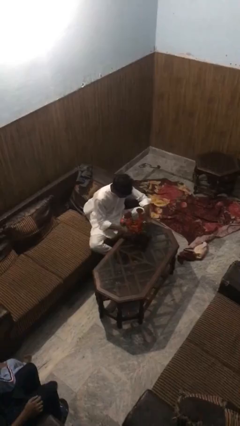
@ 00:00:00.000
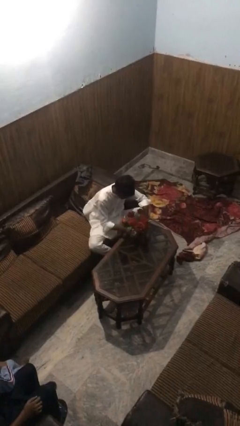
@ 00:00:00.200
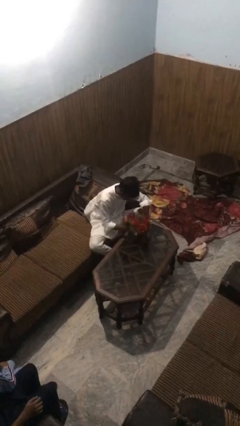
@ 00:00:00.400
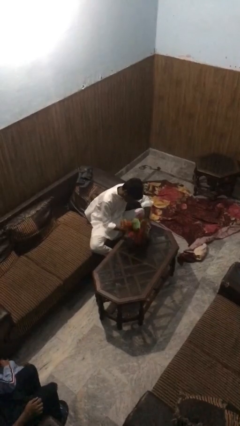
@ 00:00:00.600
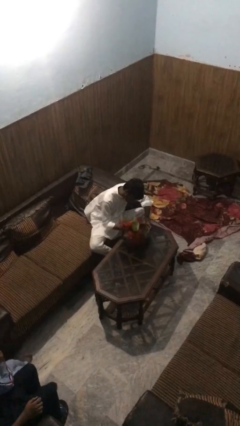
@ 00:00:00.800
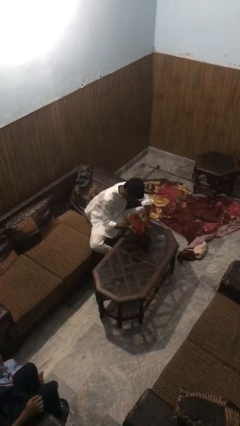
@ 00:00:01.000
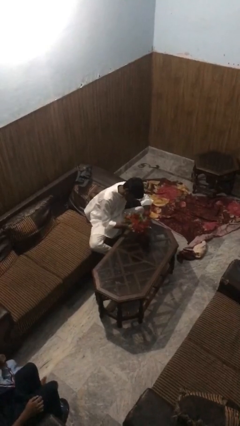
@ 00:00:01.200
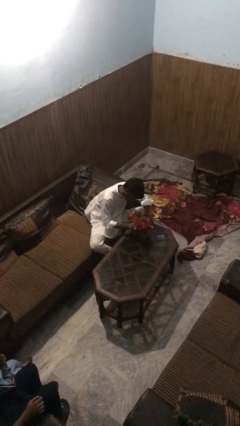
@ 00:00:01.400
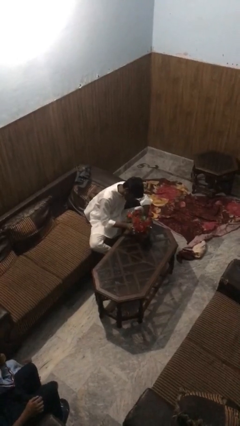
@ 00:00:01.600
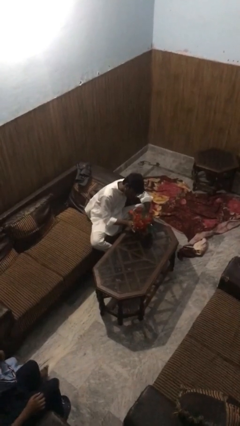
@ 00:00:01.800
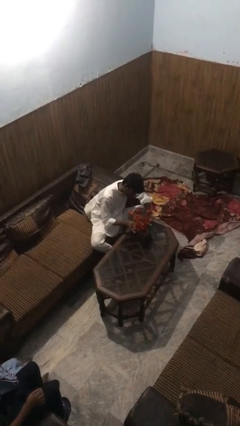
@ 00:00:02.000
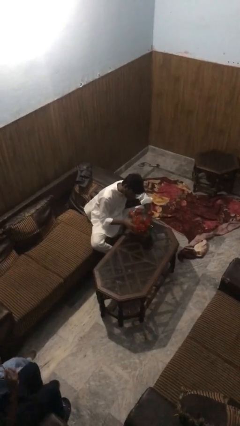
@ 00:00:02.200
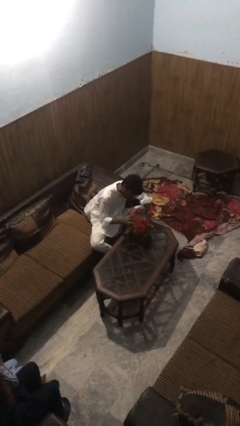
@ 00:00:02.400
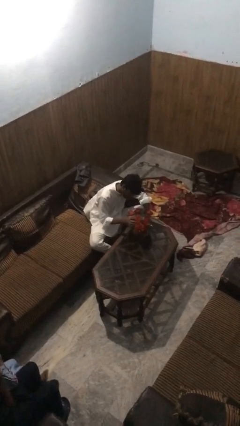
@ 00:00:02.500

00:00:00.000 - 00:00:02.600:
person arranges flowers in vase

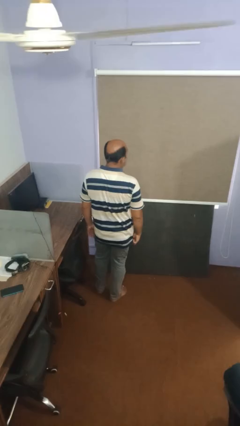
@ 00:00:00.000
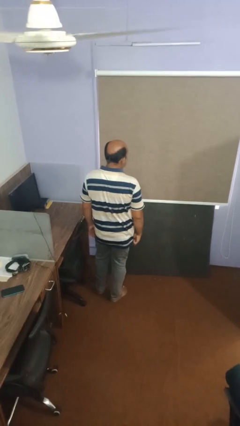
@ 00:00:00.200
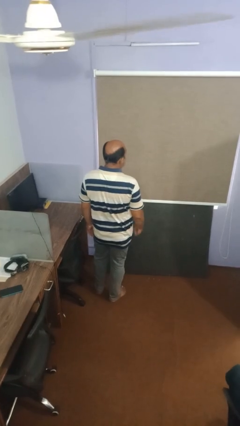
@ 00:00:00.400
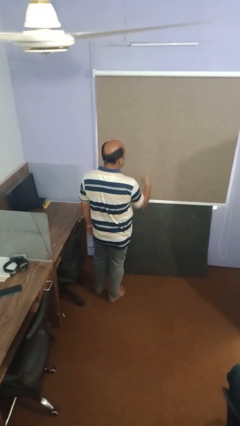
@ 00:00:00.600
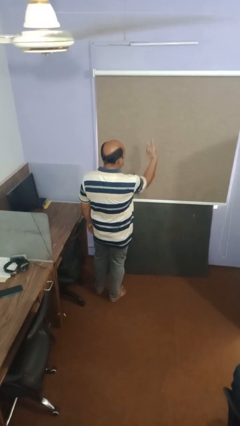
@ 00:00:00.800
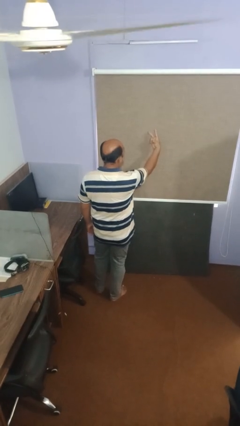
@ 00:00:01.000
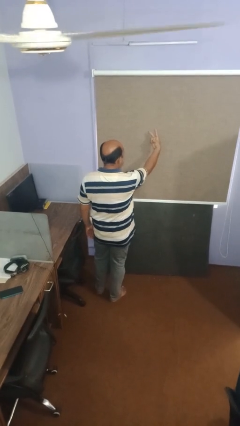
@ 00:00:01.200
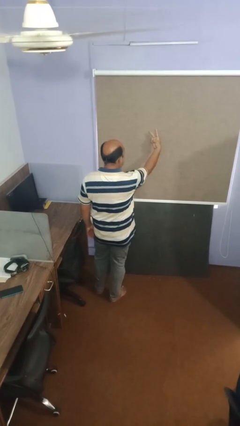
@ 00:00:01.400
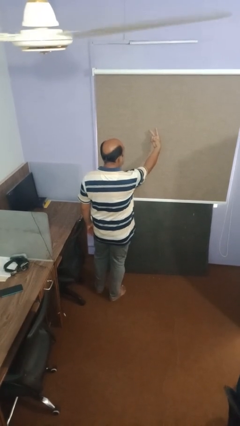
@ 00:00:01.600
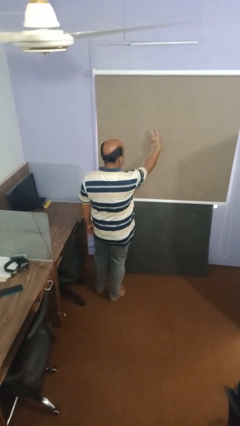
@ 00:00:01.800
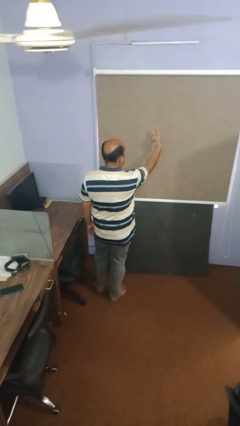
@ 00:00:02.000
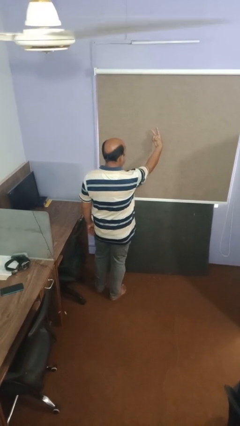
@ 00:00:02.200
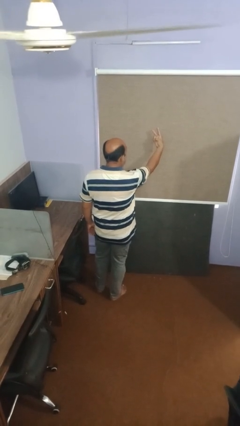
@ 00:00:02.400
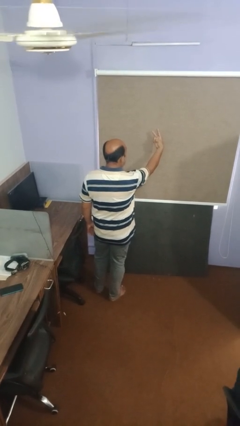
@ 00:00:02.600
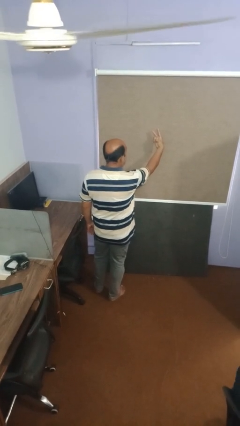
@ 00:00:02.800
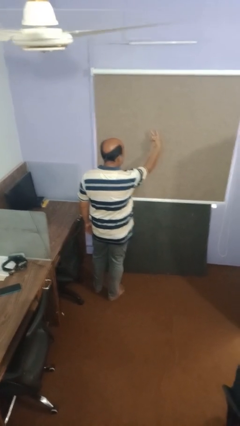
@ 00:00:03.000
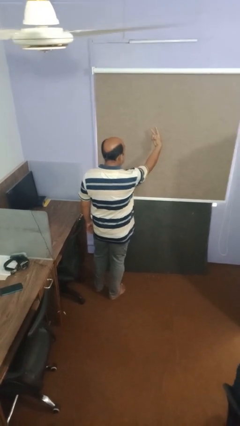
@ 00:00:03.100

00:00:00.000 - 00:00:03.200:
person gestures peace

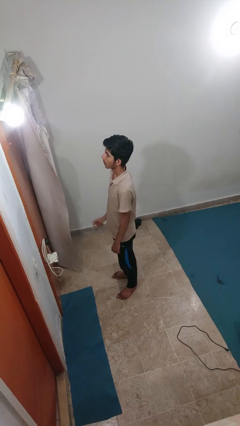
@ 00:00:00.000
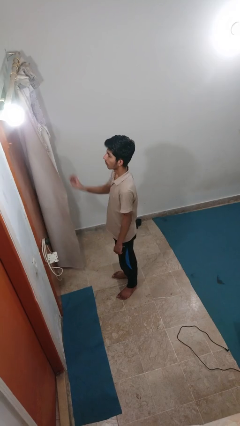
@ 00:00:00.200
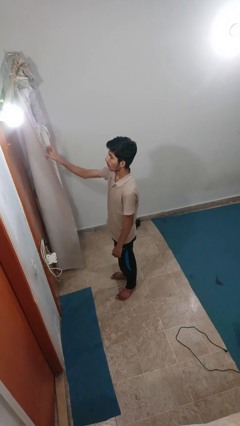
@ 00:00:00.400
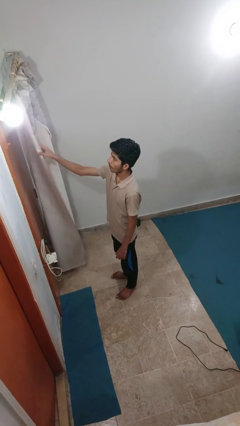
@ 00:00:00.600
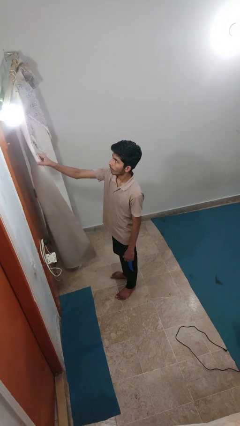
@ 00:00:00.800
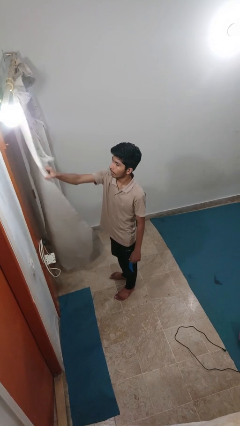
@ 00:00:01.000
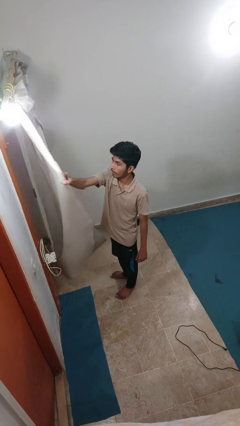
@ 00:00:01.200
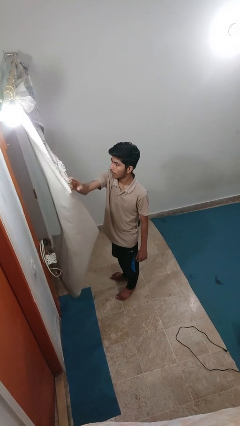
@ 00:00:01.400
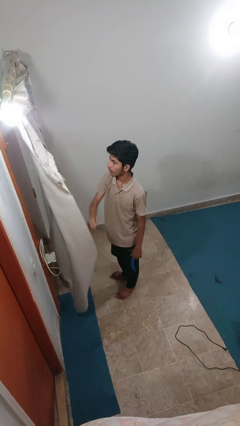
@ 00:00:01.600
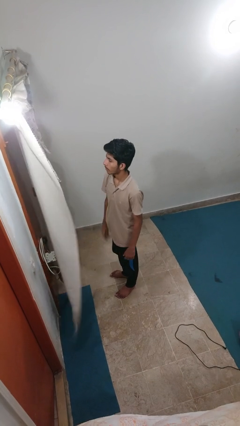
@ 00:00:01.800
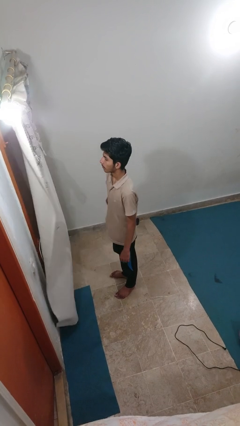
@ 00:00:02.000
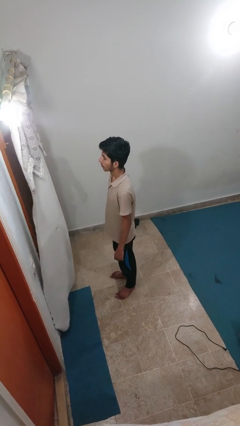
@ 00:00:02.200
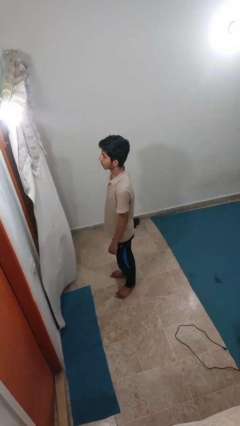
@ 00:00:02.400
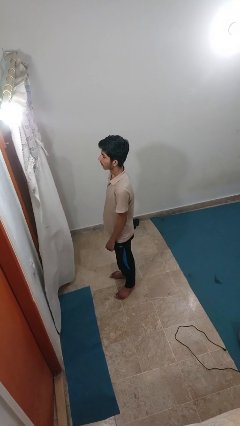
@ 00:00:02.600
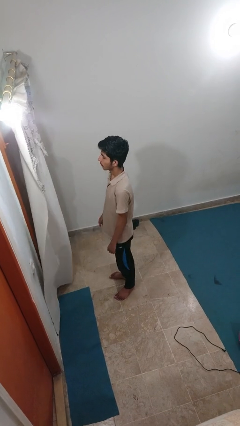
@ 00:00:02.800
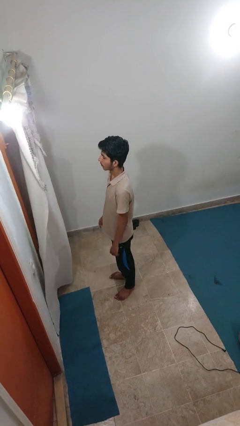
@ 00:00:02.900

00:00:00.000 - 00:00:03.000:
person closes curtains

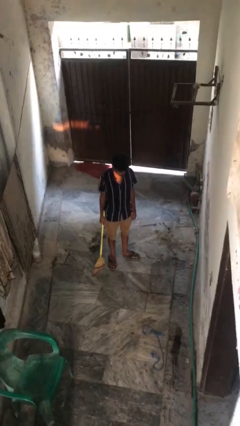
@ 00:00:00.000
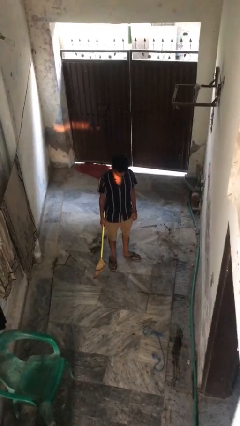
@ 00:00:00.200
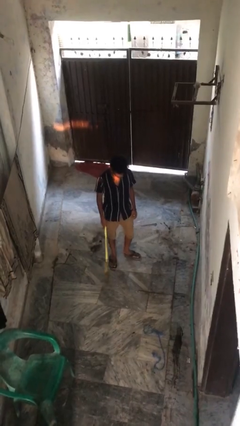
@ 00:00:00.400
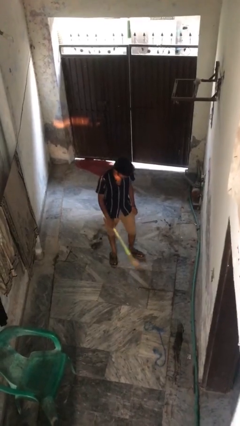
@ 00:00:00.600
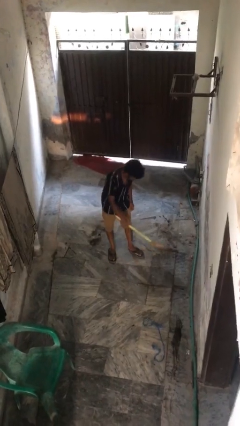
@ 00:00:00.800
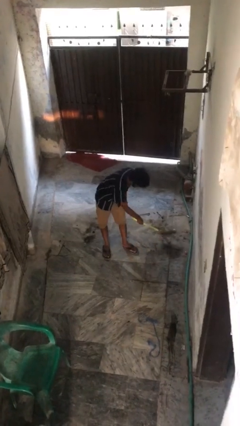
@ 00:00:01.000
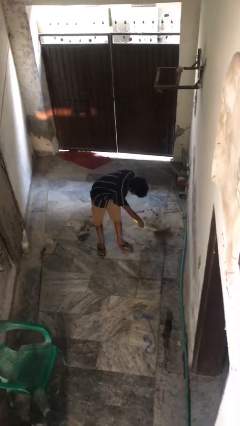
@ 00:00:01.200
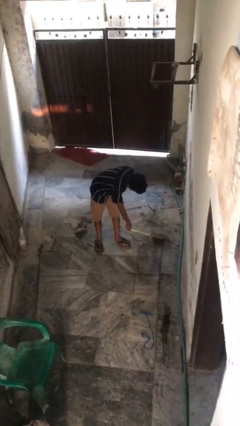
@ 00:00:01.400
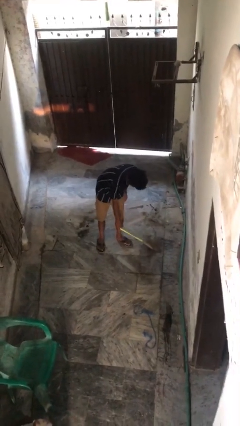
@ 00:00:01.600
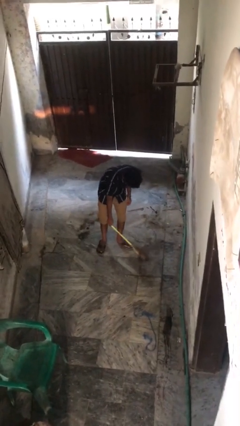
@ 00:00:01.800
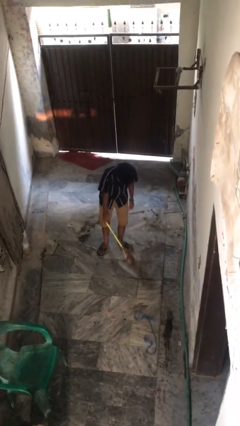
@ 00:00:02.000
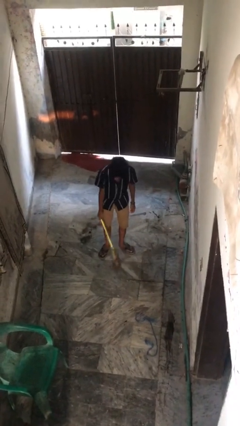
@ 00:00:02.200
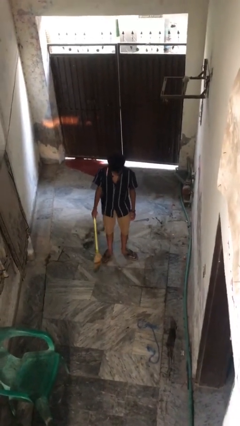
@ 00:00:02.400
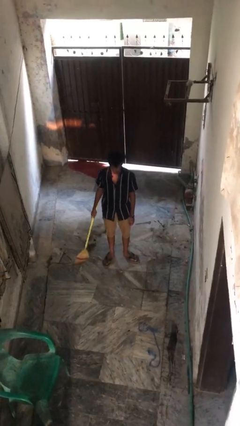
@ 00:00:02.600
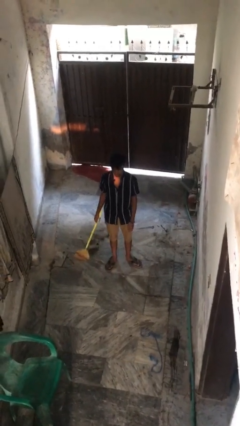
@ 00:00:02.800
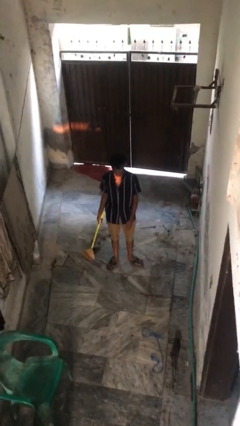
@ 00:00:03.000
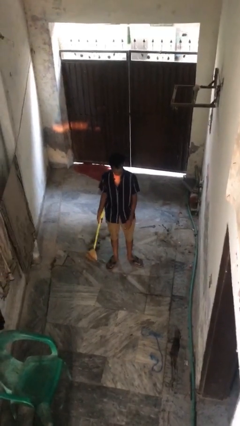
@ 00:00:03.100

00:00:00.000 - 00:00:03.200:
person sweeps floor

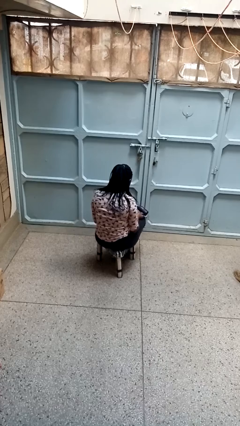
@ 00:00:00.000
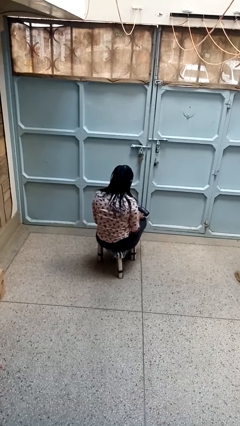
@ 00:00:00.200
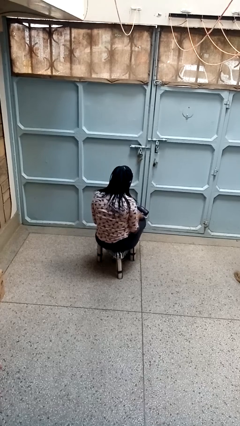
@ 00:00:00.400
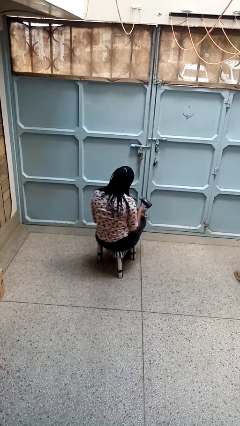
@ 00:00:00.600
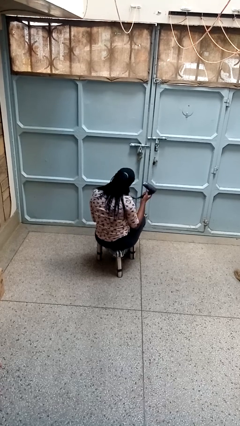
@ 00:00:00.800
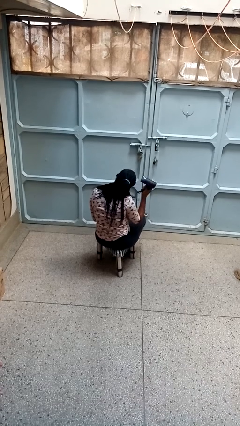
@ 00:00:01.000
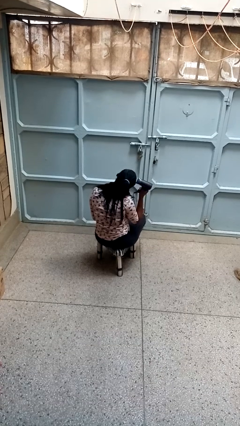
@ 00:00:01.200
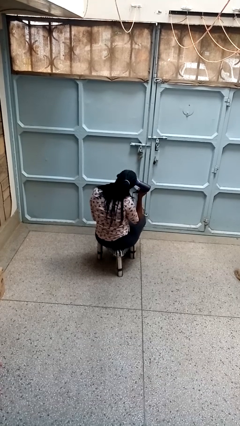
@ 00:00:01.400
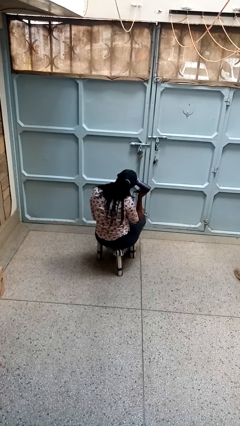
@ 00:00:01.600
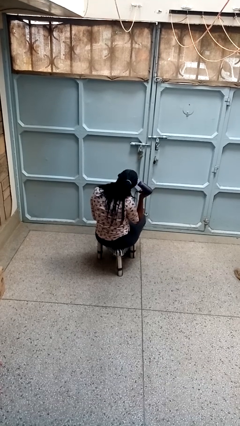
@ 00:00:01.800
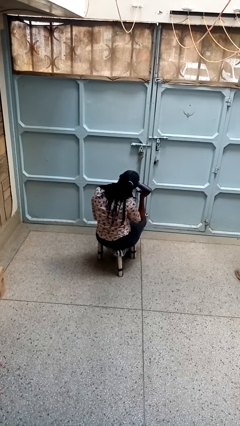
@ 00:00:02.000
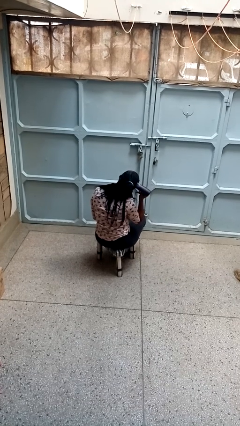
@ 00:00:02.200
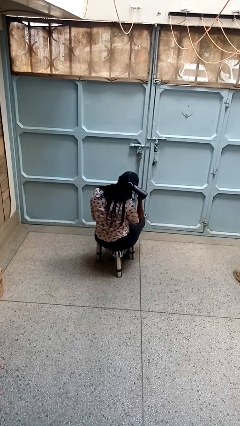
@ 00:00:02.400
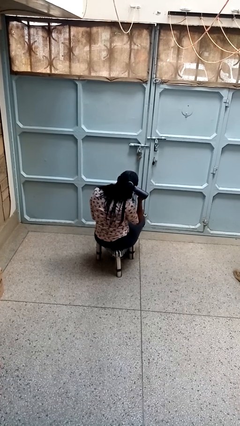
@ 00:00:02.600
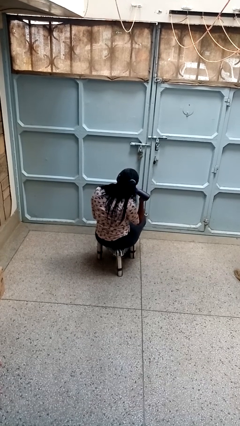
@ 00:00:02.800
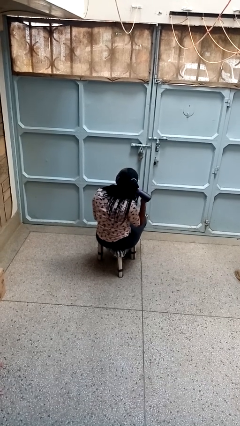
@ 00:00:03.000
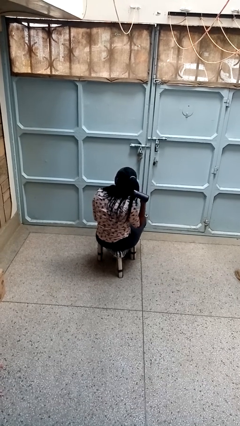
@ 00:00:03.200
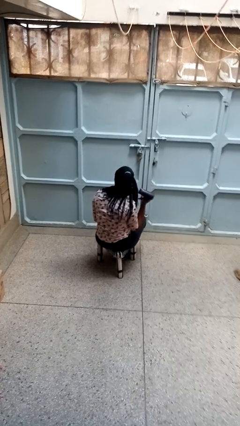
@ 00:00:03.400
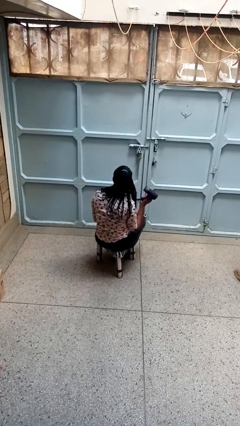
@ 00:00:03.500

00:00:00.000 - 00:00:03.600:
person dries hair with hairdryer

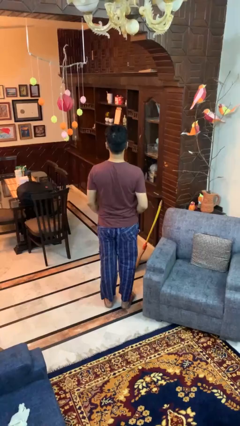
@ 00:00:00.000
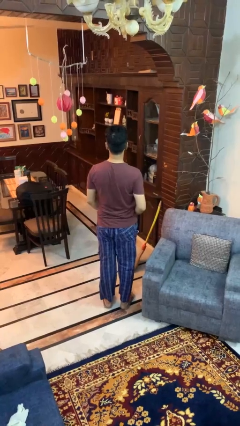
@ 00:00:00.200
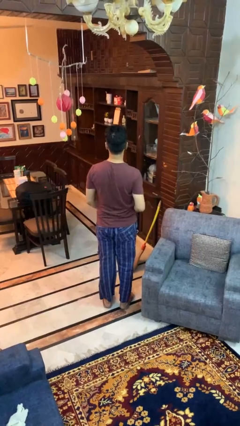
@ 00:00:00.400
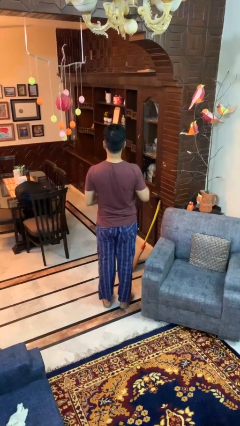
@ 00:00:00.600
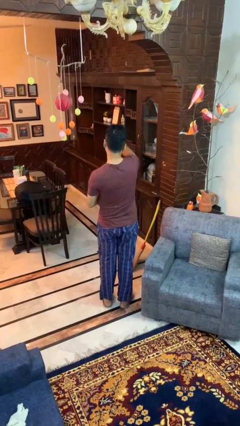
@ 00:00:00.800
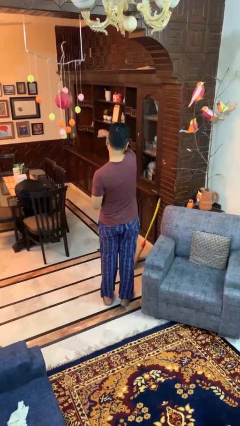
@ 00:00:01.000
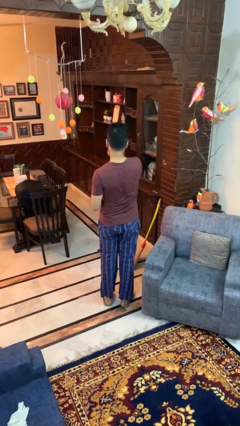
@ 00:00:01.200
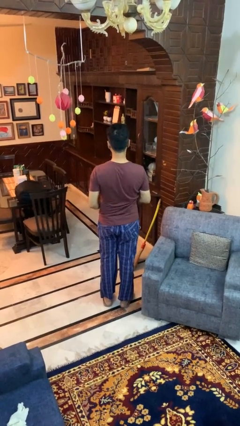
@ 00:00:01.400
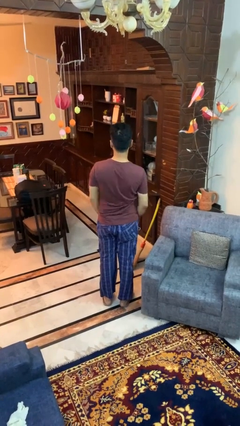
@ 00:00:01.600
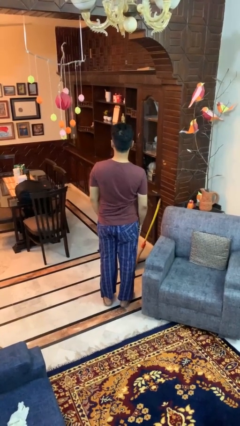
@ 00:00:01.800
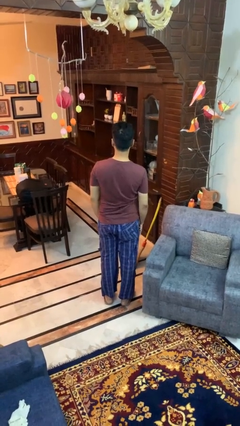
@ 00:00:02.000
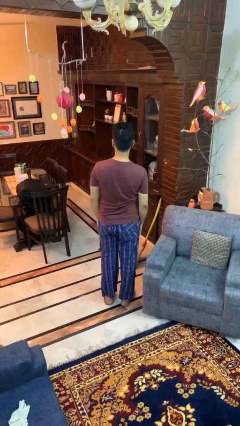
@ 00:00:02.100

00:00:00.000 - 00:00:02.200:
person karate chop
